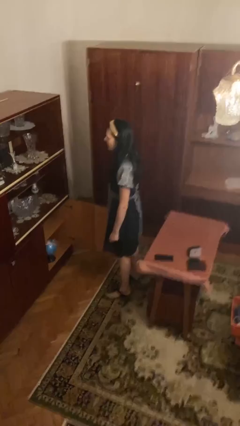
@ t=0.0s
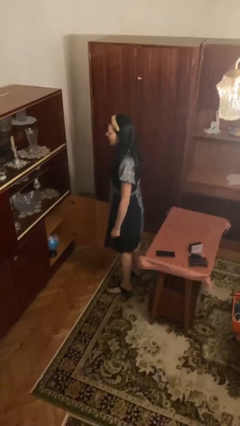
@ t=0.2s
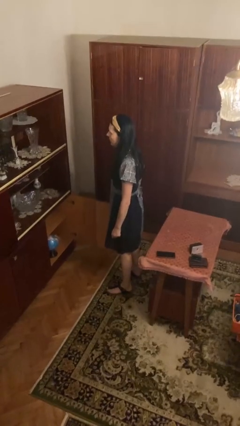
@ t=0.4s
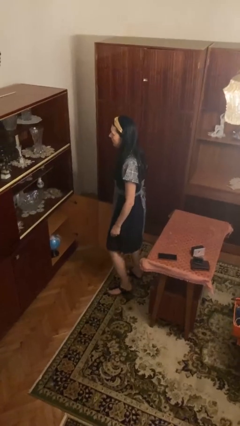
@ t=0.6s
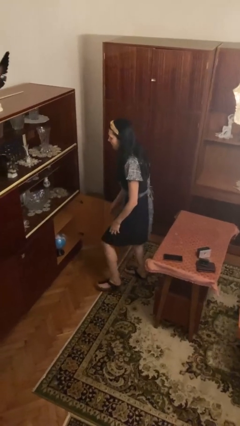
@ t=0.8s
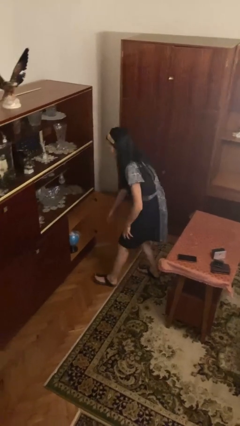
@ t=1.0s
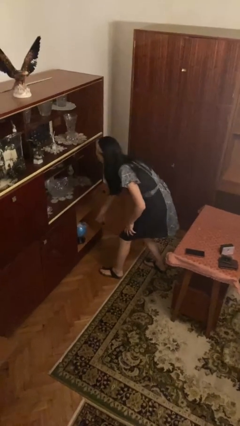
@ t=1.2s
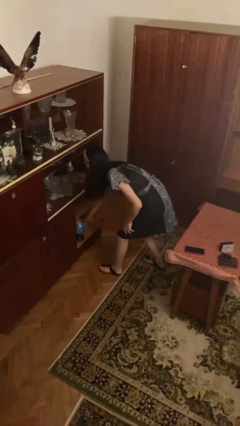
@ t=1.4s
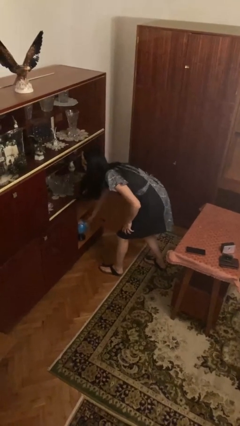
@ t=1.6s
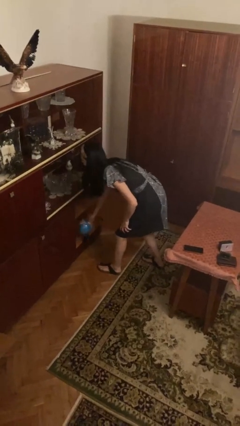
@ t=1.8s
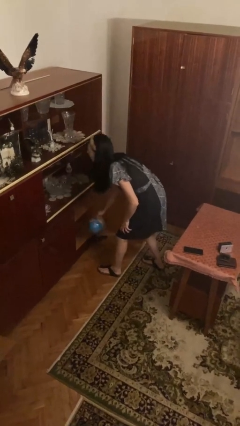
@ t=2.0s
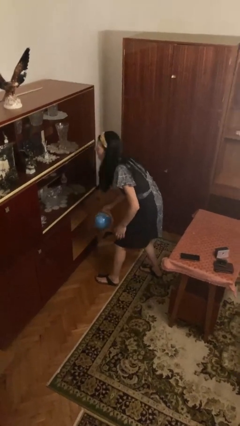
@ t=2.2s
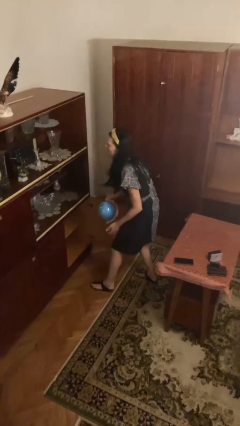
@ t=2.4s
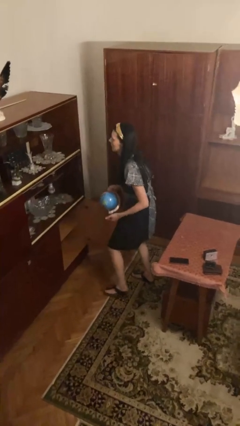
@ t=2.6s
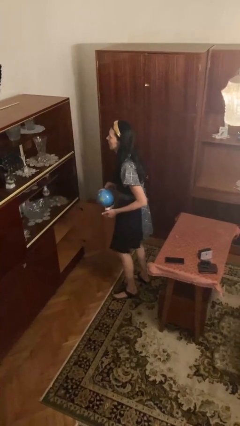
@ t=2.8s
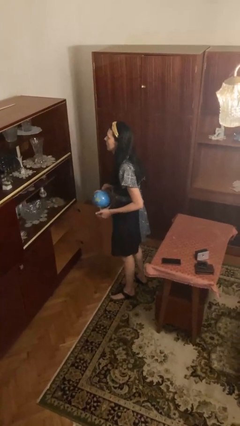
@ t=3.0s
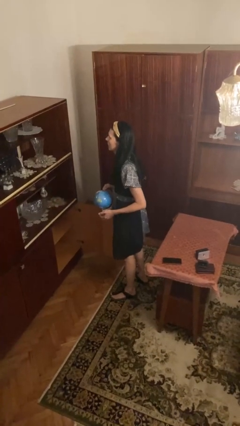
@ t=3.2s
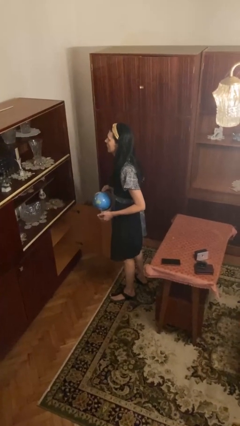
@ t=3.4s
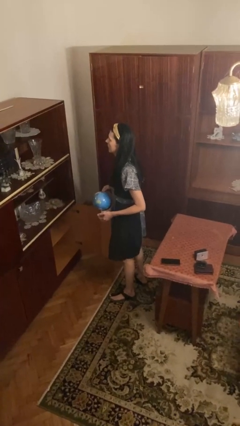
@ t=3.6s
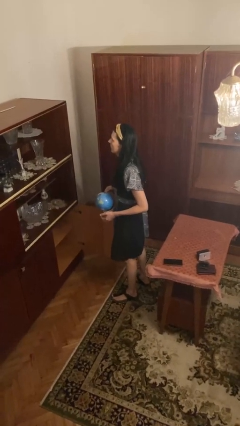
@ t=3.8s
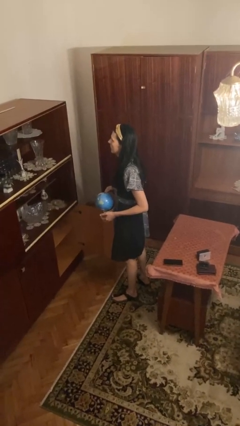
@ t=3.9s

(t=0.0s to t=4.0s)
person picks up object from cabinet

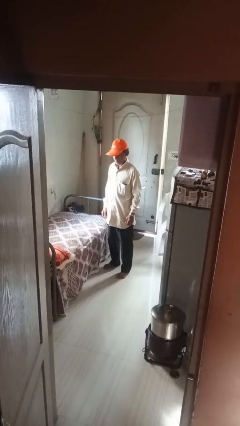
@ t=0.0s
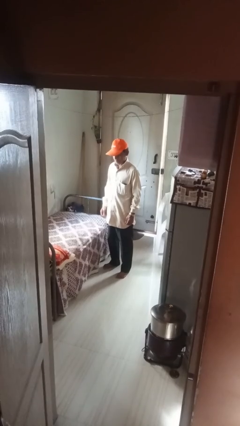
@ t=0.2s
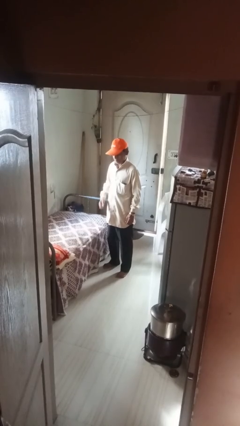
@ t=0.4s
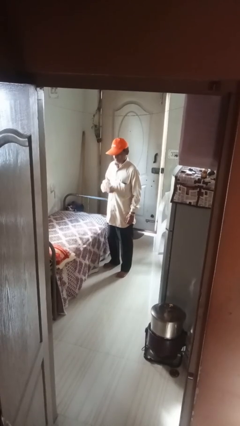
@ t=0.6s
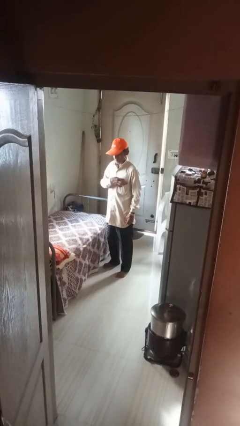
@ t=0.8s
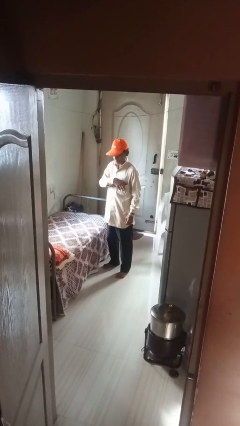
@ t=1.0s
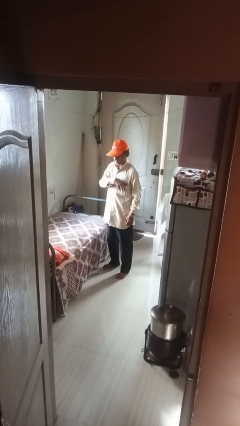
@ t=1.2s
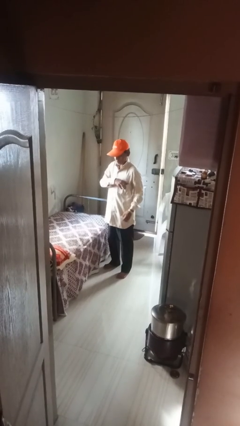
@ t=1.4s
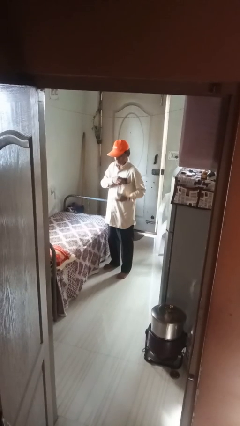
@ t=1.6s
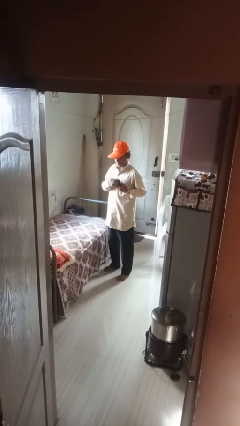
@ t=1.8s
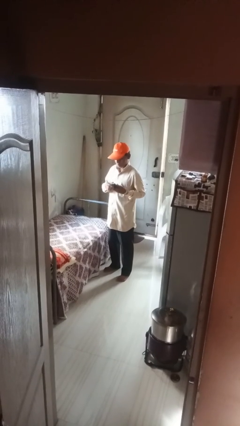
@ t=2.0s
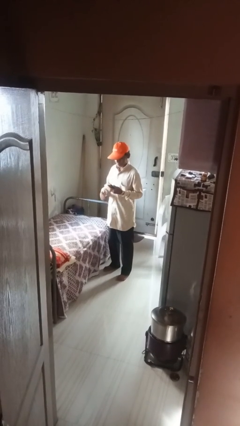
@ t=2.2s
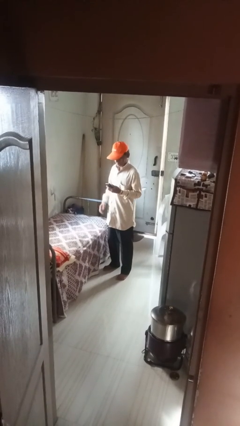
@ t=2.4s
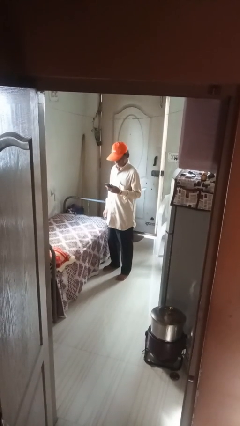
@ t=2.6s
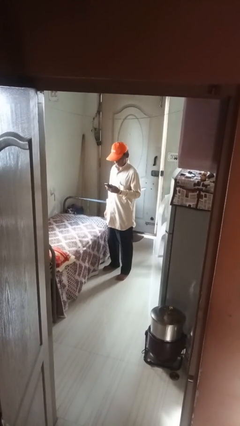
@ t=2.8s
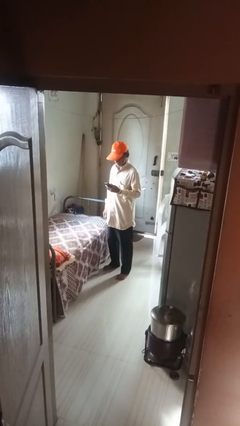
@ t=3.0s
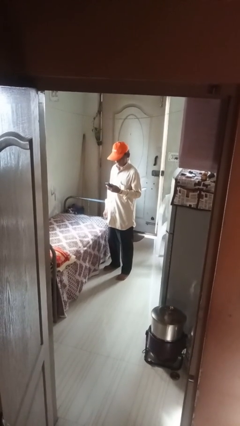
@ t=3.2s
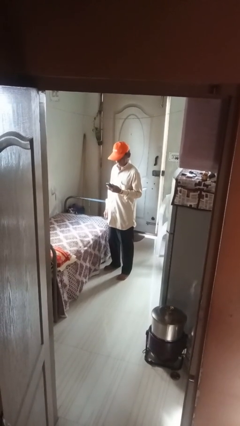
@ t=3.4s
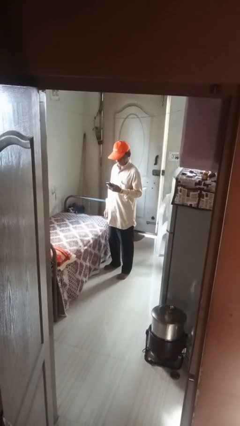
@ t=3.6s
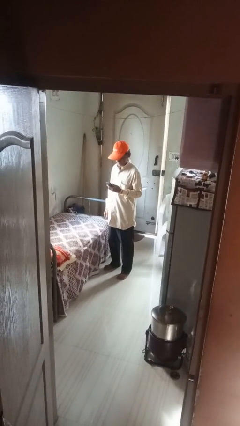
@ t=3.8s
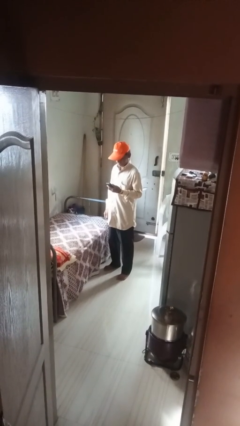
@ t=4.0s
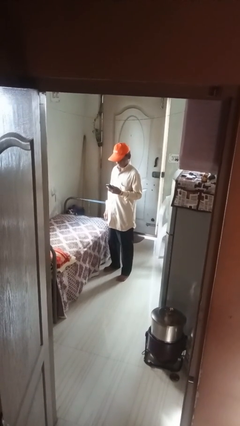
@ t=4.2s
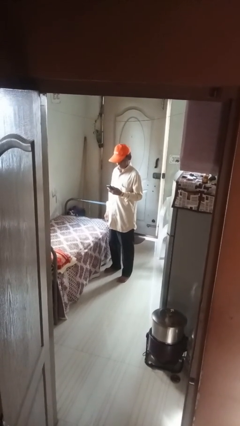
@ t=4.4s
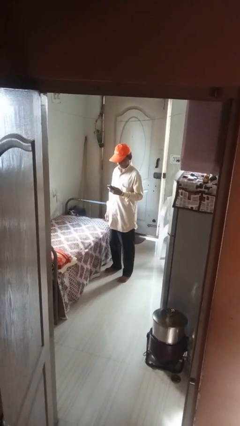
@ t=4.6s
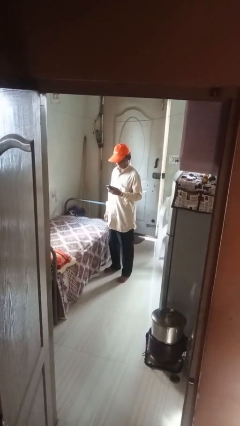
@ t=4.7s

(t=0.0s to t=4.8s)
person takes phone from pocket

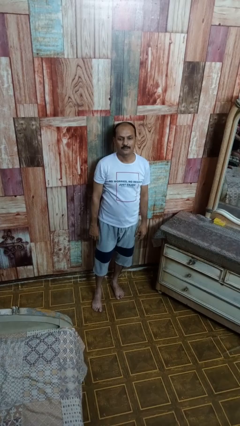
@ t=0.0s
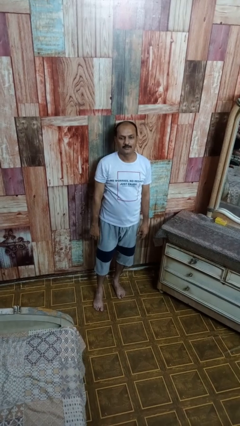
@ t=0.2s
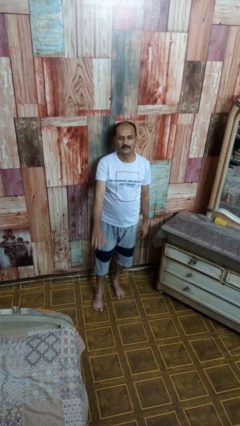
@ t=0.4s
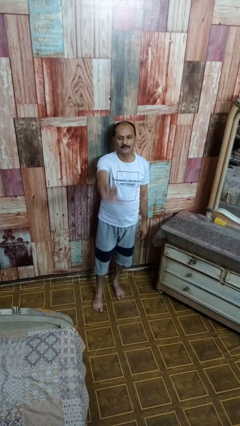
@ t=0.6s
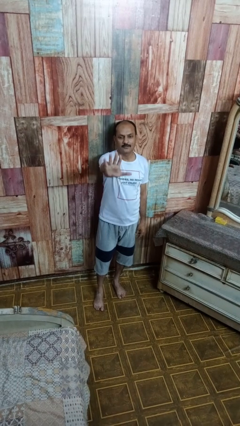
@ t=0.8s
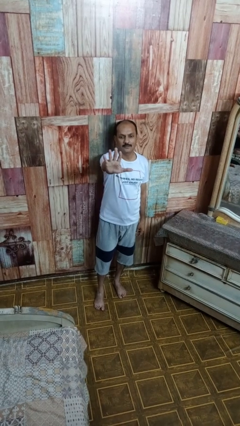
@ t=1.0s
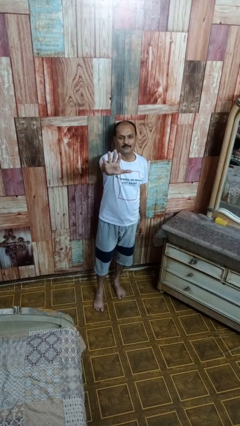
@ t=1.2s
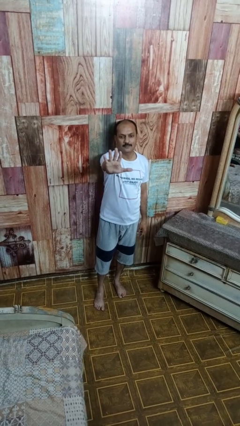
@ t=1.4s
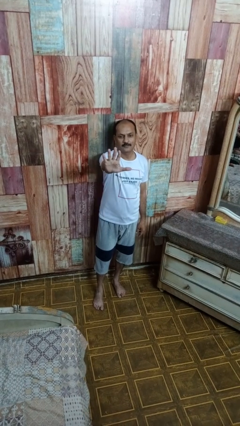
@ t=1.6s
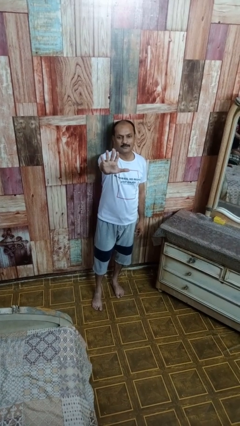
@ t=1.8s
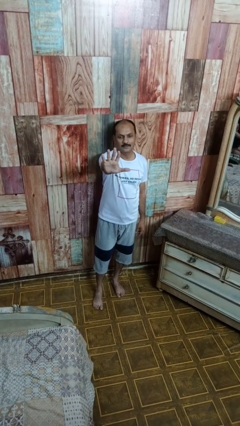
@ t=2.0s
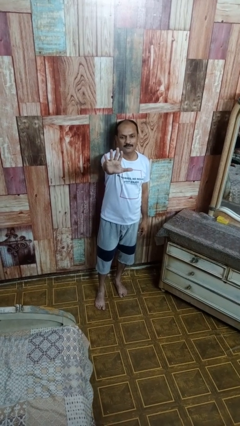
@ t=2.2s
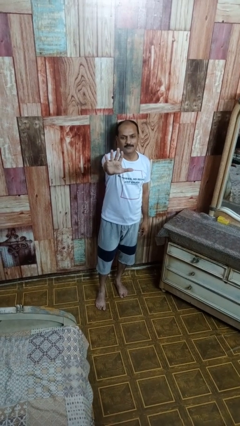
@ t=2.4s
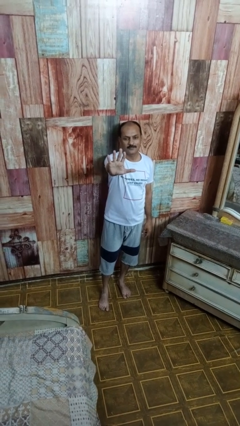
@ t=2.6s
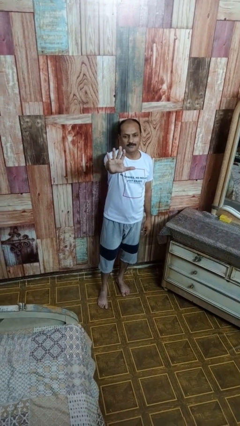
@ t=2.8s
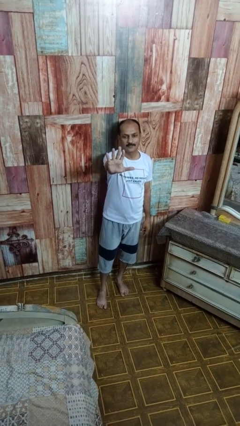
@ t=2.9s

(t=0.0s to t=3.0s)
person gestures number five

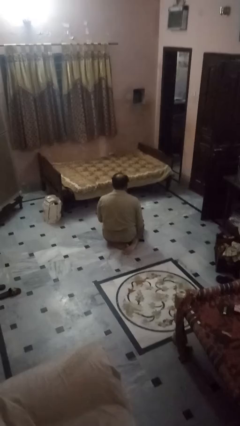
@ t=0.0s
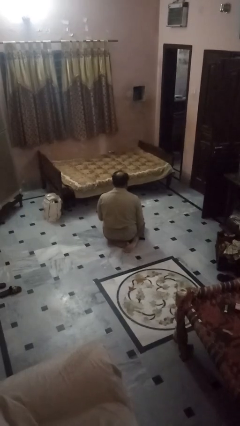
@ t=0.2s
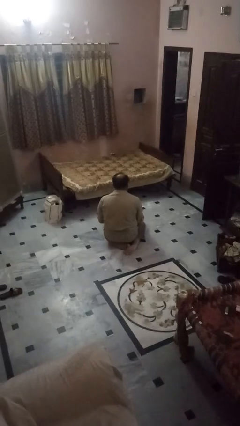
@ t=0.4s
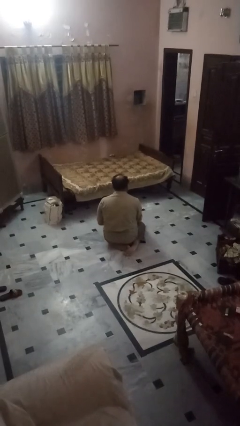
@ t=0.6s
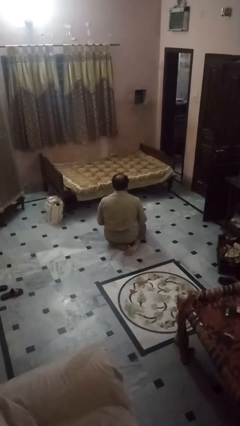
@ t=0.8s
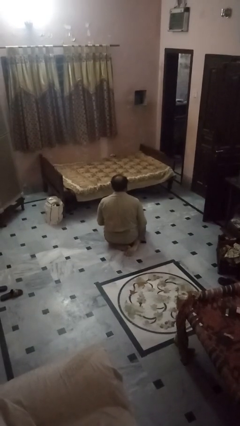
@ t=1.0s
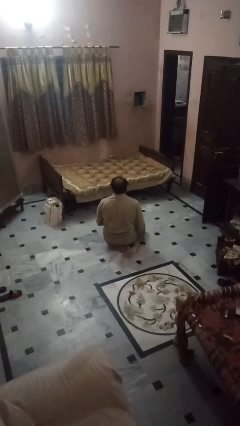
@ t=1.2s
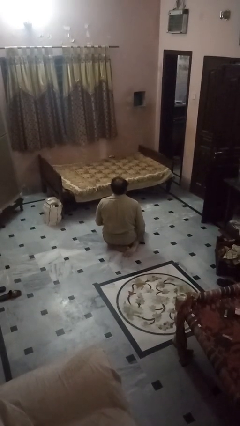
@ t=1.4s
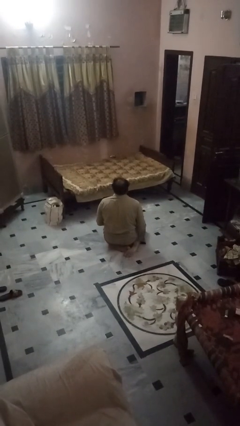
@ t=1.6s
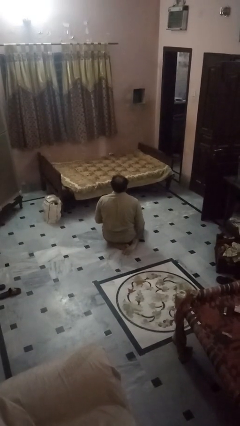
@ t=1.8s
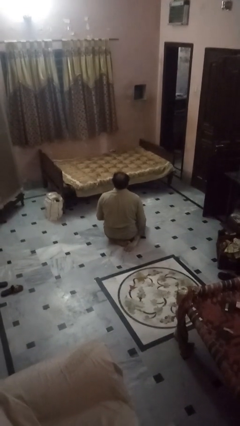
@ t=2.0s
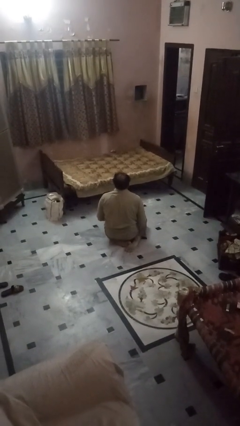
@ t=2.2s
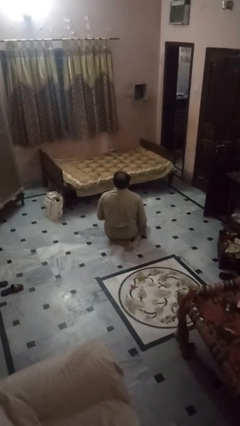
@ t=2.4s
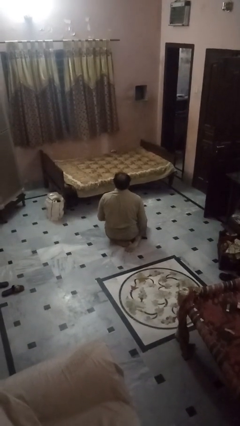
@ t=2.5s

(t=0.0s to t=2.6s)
person picks up object from floor

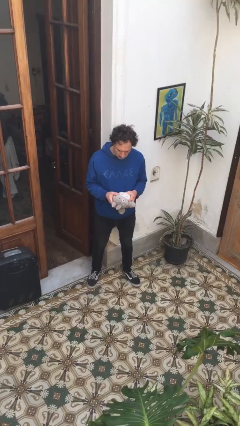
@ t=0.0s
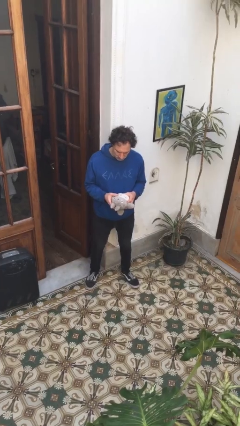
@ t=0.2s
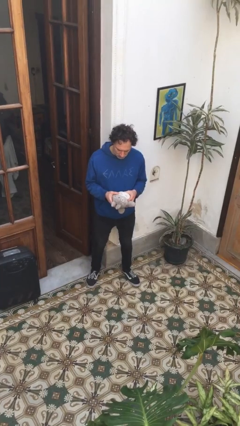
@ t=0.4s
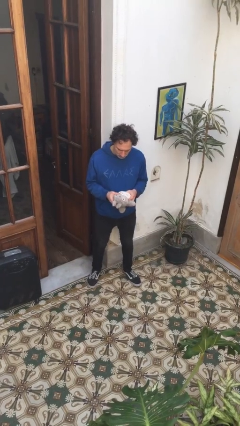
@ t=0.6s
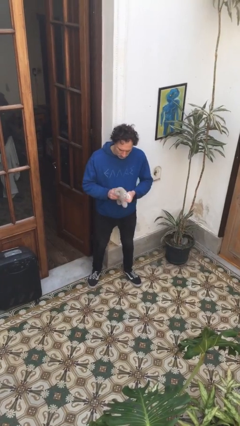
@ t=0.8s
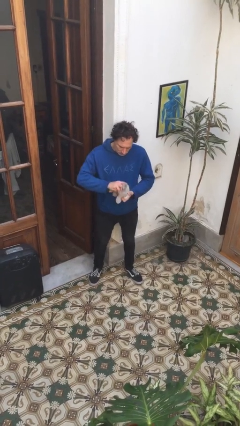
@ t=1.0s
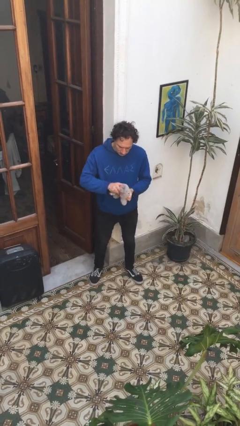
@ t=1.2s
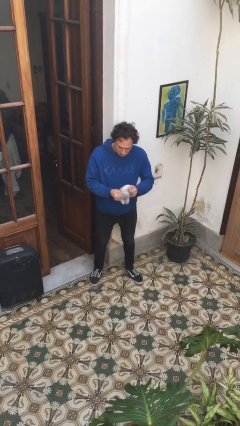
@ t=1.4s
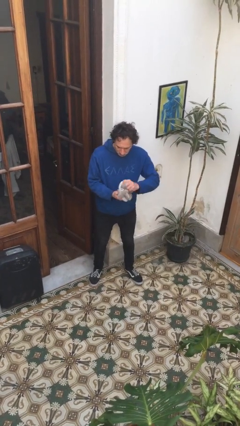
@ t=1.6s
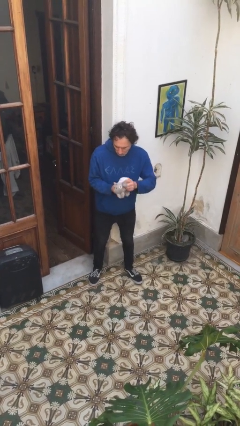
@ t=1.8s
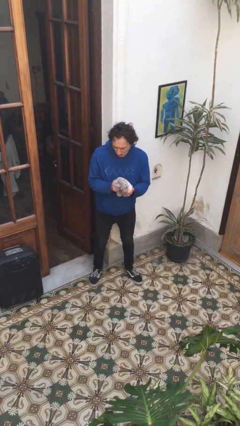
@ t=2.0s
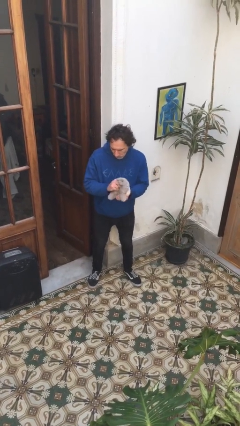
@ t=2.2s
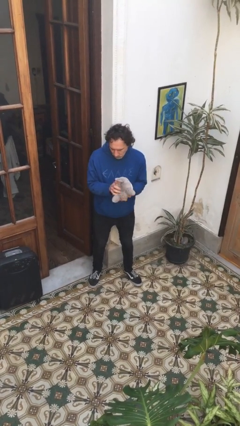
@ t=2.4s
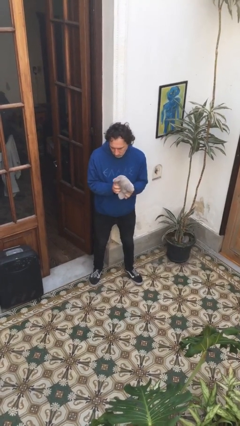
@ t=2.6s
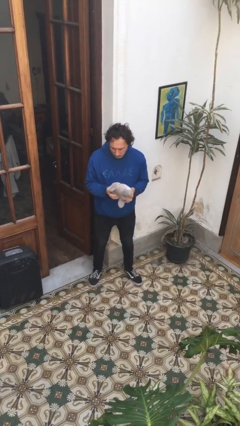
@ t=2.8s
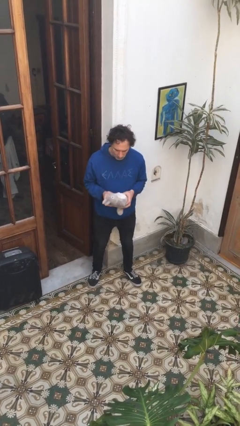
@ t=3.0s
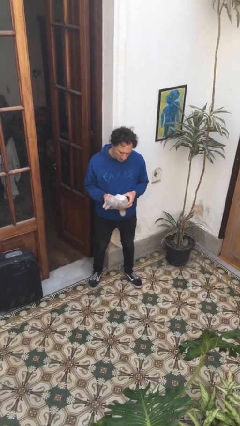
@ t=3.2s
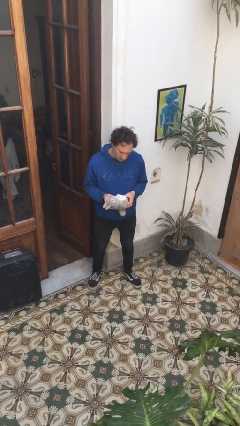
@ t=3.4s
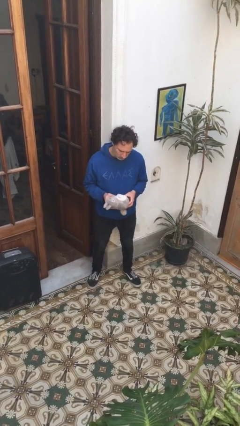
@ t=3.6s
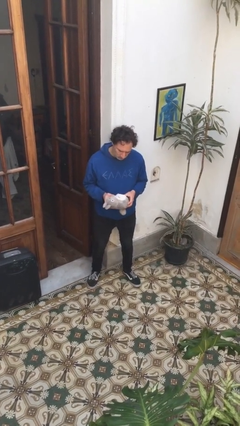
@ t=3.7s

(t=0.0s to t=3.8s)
person squeezes object
